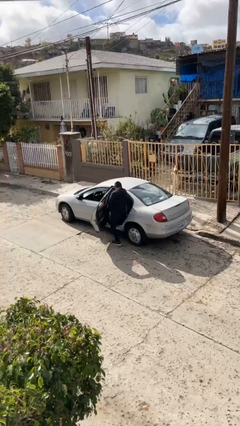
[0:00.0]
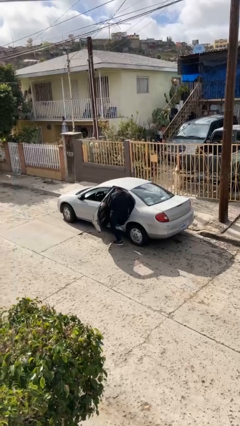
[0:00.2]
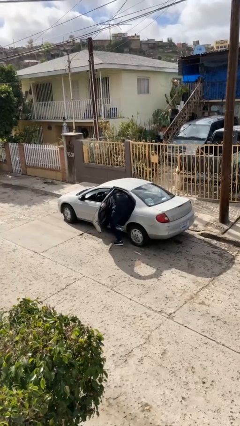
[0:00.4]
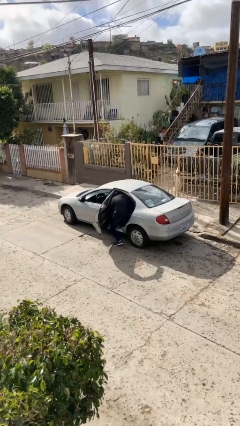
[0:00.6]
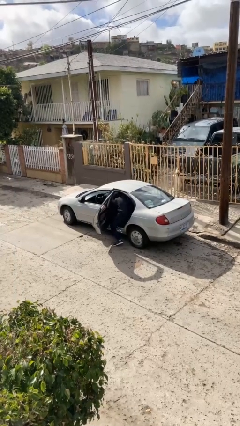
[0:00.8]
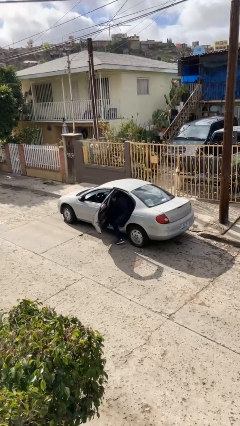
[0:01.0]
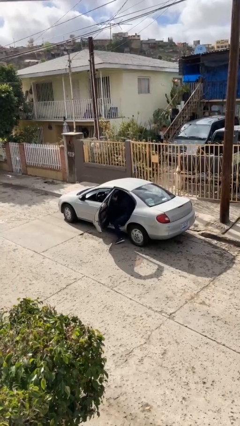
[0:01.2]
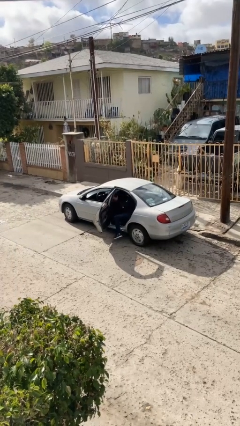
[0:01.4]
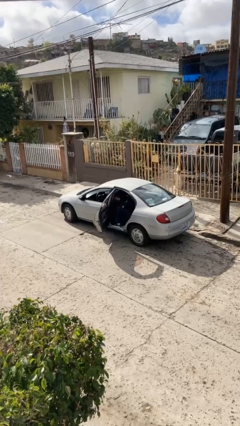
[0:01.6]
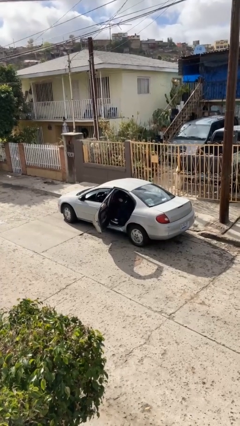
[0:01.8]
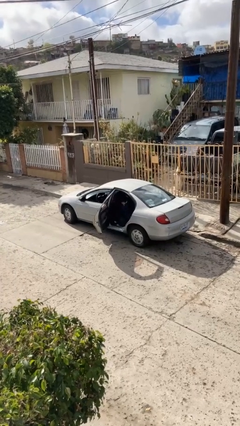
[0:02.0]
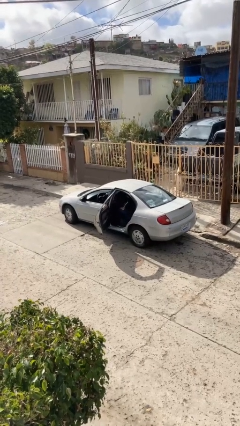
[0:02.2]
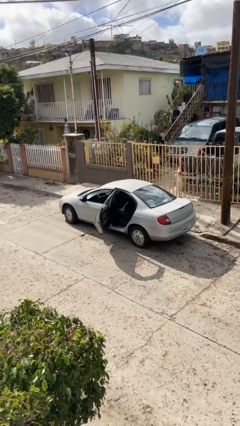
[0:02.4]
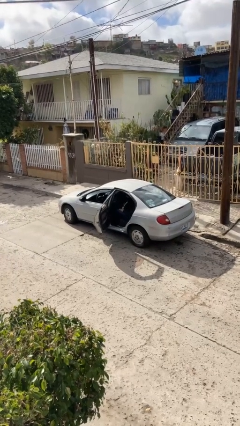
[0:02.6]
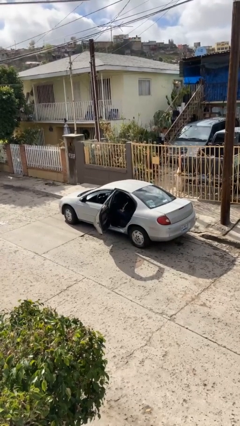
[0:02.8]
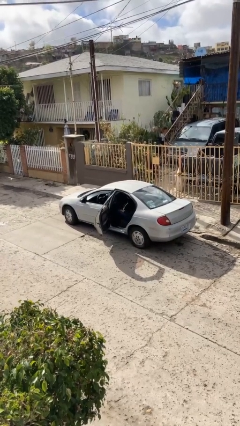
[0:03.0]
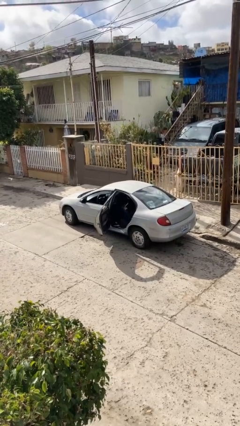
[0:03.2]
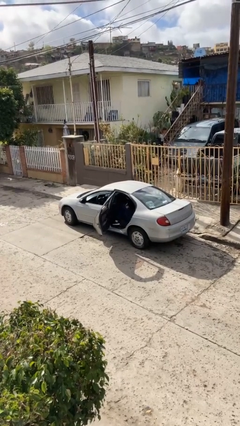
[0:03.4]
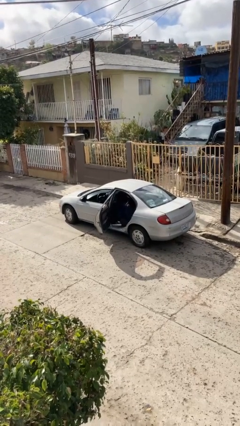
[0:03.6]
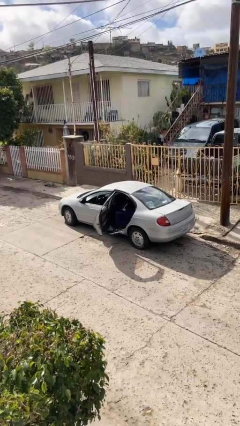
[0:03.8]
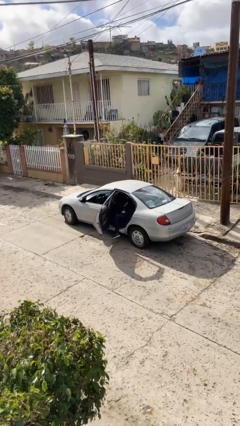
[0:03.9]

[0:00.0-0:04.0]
person enters car

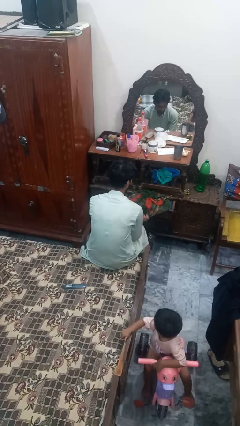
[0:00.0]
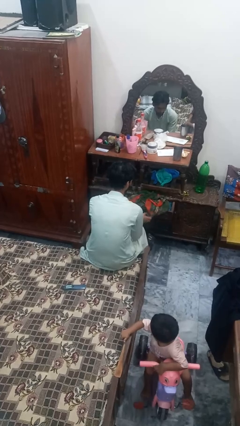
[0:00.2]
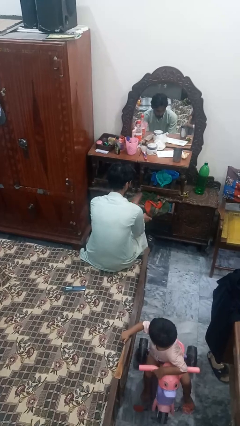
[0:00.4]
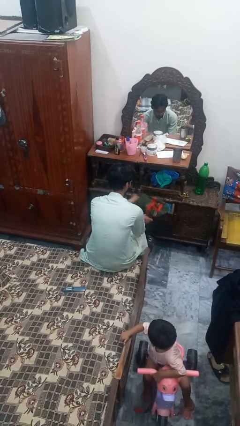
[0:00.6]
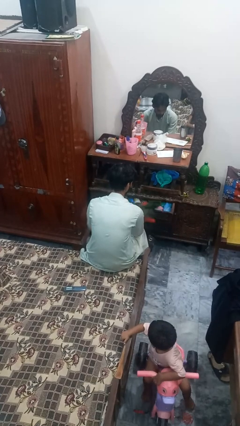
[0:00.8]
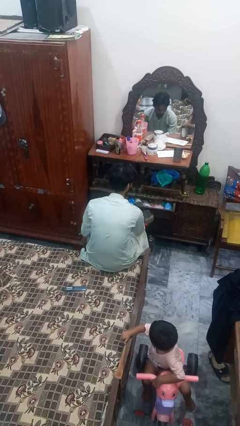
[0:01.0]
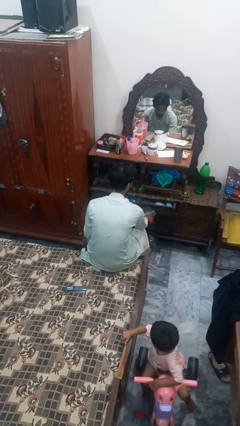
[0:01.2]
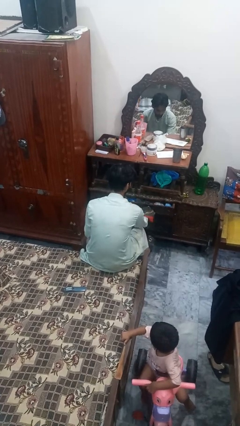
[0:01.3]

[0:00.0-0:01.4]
person takes clothes from dresser

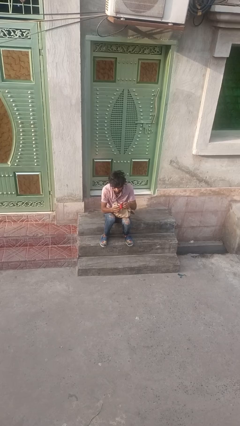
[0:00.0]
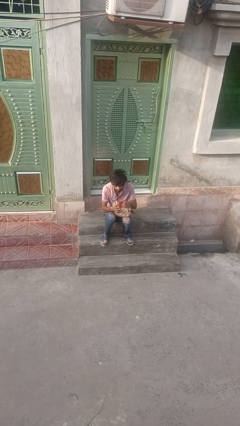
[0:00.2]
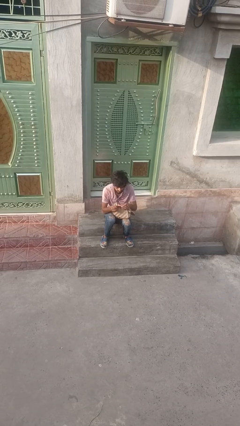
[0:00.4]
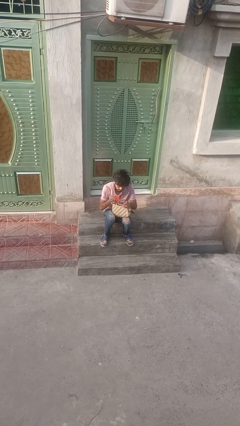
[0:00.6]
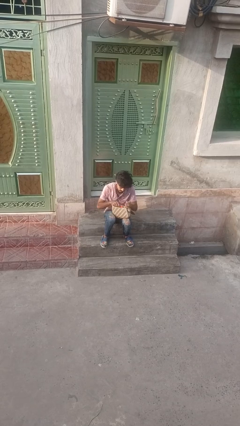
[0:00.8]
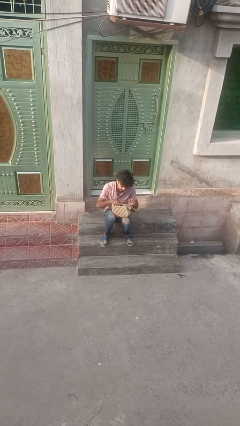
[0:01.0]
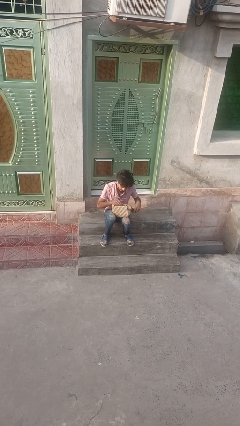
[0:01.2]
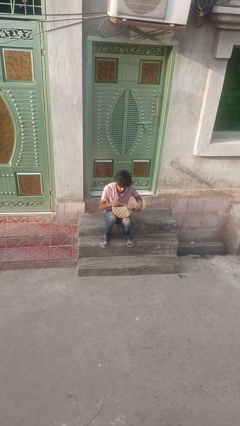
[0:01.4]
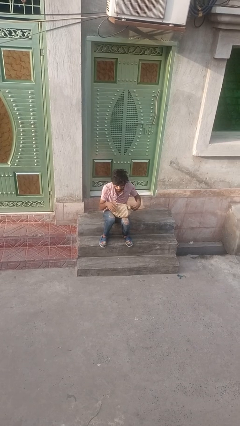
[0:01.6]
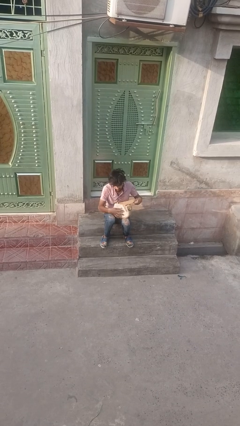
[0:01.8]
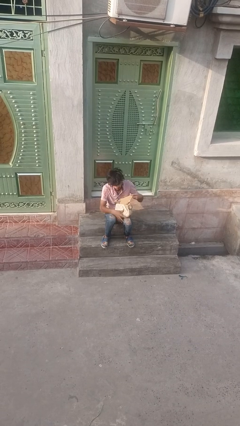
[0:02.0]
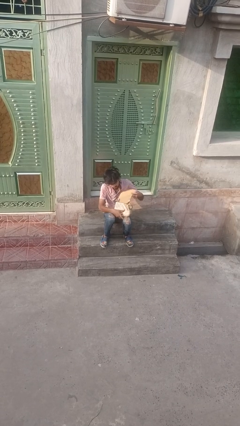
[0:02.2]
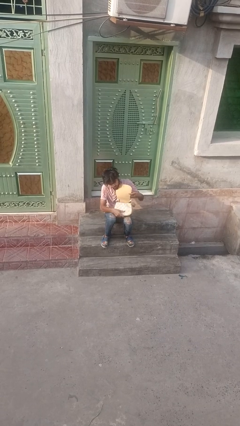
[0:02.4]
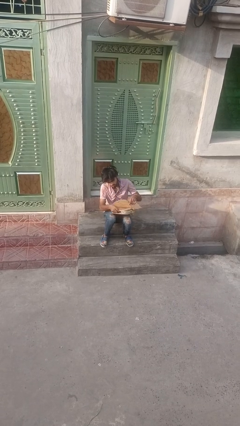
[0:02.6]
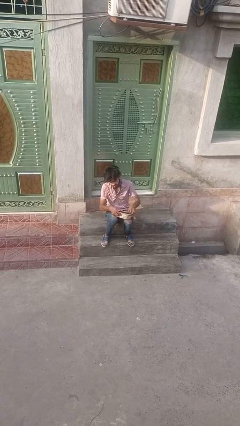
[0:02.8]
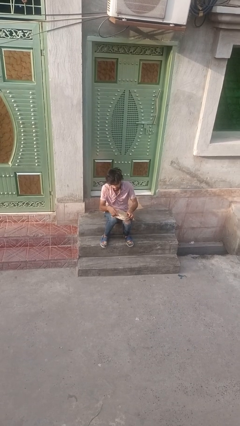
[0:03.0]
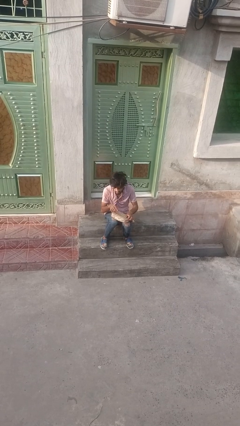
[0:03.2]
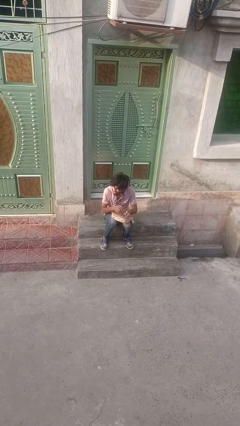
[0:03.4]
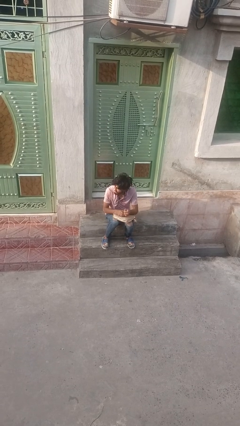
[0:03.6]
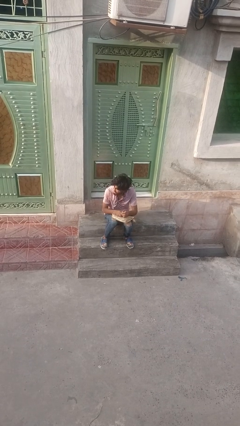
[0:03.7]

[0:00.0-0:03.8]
person puts object into backpack

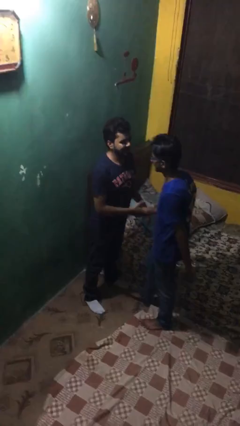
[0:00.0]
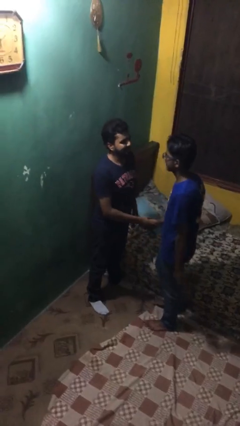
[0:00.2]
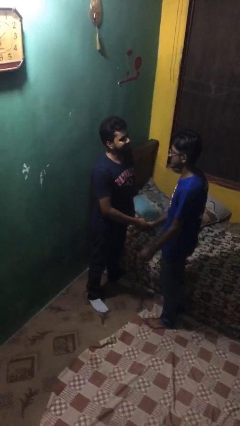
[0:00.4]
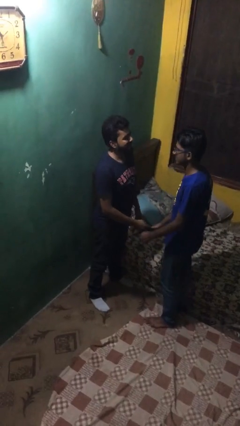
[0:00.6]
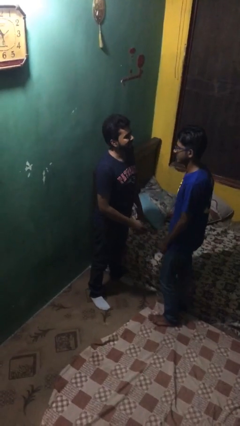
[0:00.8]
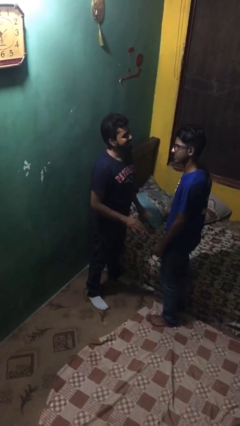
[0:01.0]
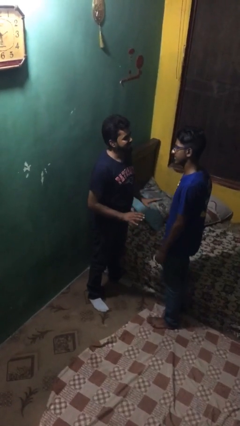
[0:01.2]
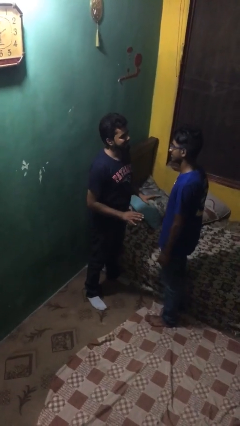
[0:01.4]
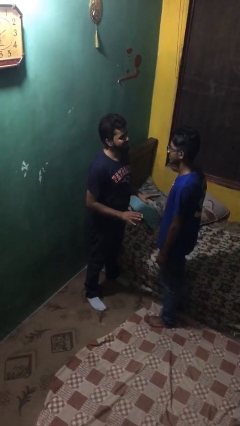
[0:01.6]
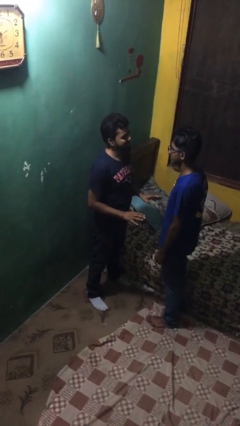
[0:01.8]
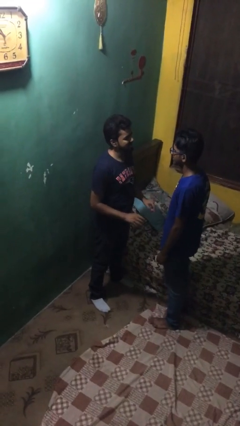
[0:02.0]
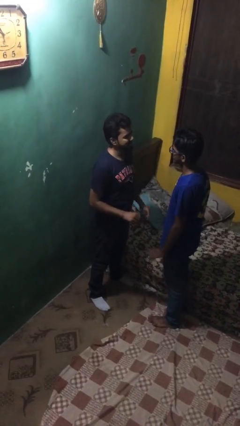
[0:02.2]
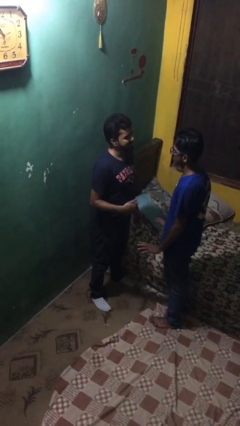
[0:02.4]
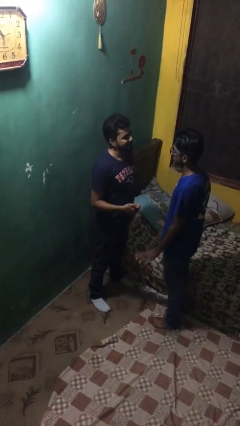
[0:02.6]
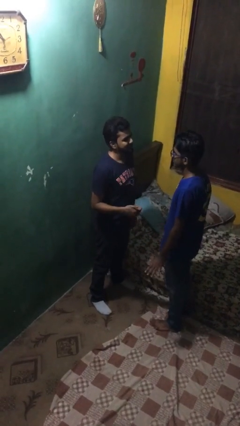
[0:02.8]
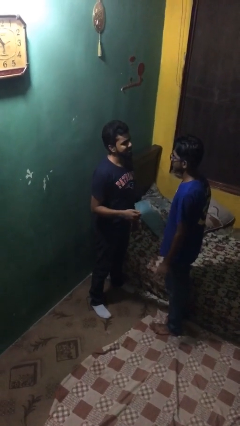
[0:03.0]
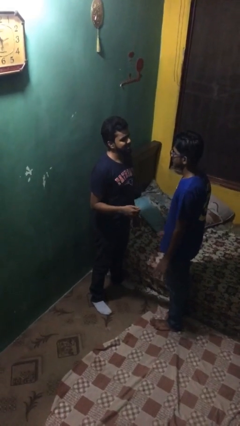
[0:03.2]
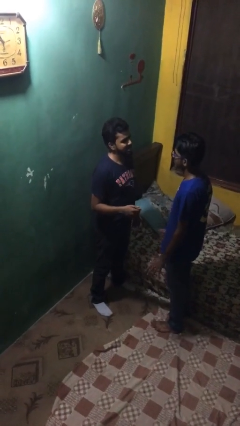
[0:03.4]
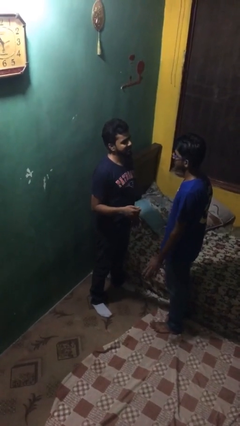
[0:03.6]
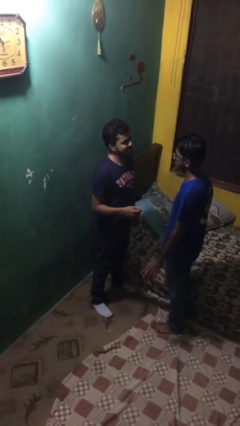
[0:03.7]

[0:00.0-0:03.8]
person talks to person

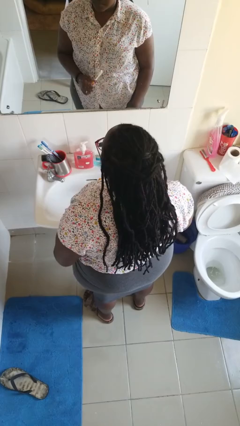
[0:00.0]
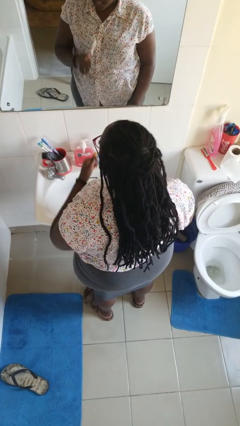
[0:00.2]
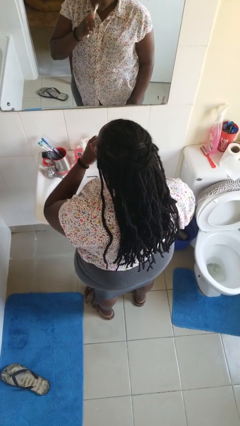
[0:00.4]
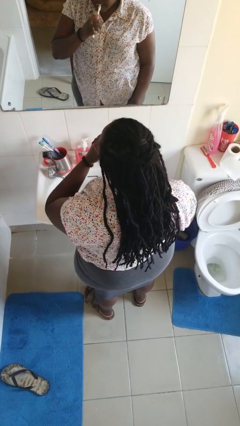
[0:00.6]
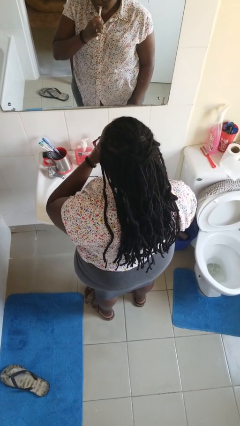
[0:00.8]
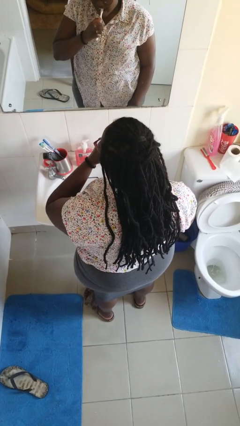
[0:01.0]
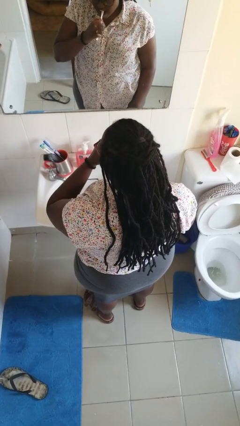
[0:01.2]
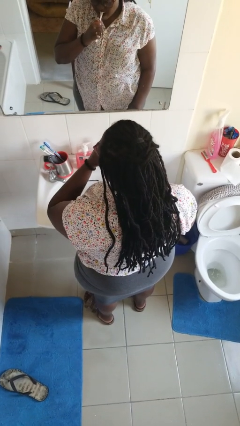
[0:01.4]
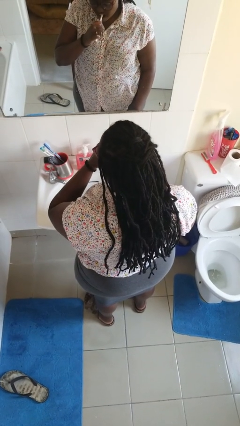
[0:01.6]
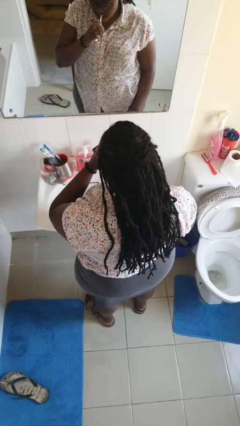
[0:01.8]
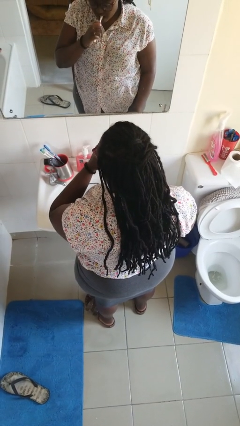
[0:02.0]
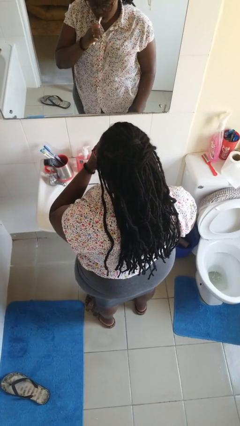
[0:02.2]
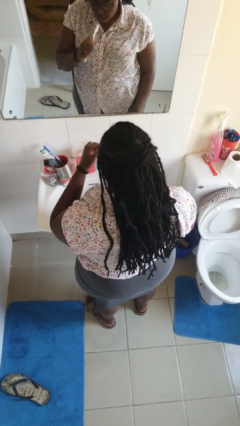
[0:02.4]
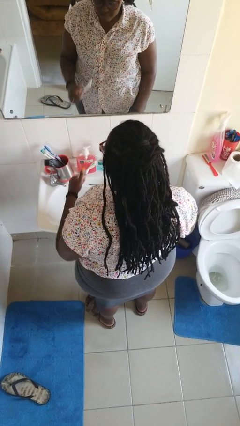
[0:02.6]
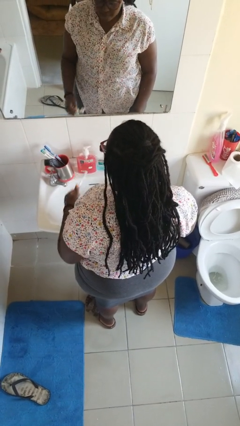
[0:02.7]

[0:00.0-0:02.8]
person brushes teeth

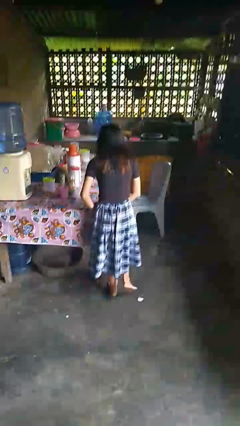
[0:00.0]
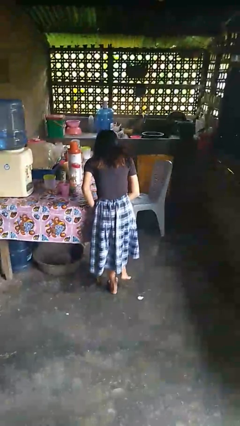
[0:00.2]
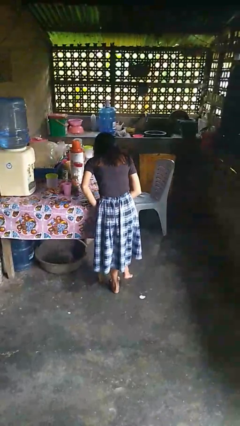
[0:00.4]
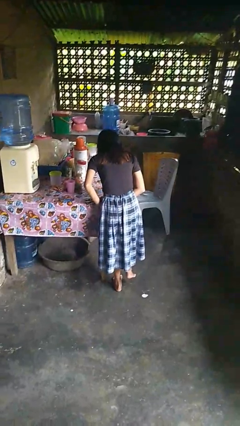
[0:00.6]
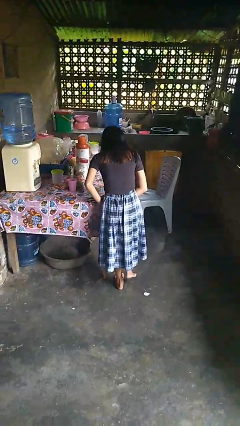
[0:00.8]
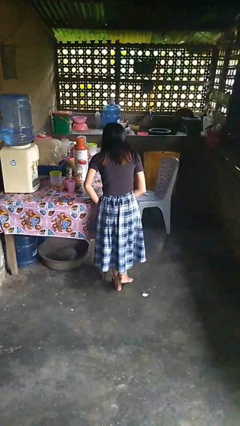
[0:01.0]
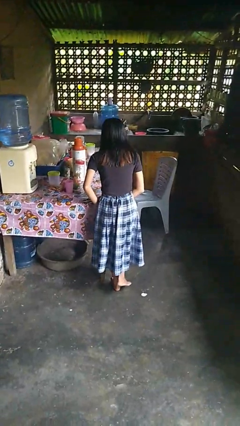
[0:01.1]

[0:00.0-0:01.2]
person bumps into table

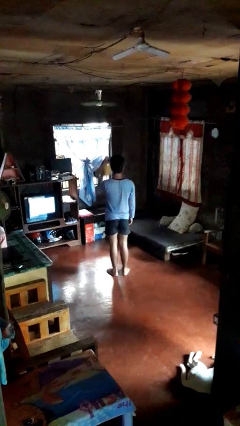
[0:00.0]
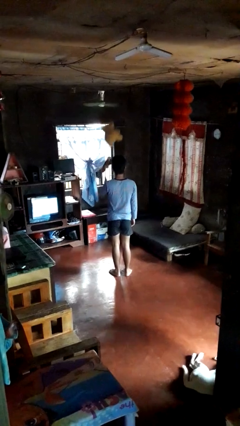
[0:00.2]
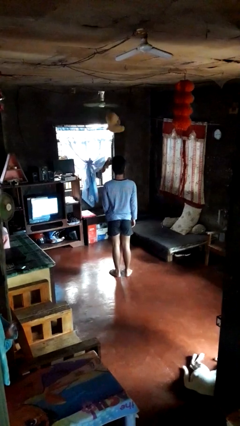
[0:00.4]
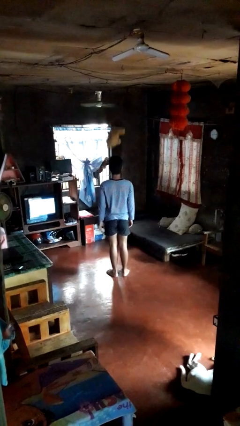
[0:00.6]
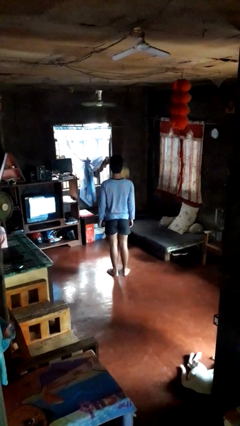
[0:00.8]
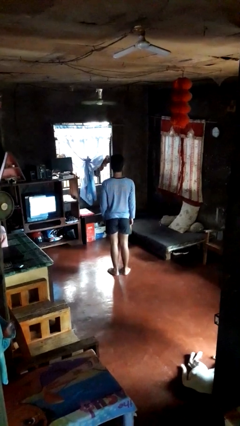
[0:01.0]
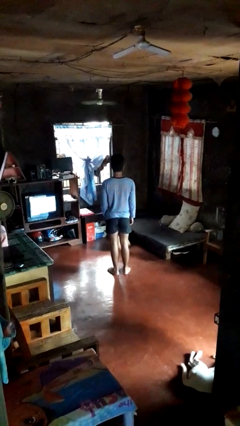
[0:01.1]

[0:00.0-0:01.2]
person throws object into air
